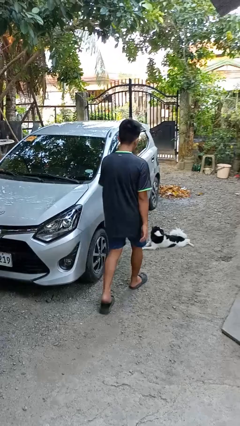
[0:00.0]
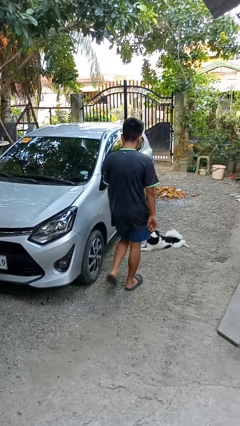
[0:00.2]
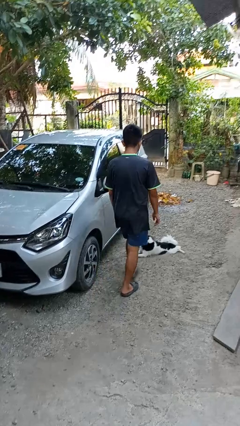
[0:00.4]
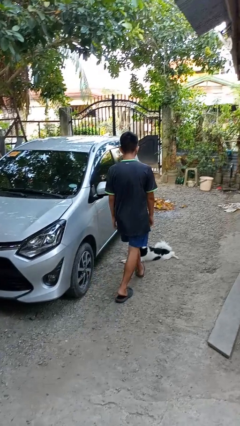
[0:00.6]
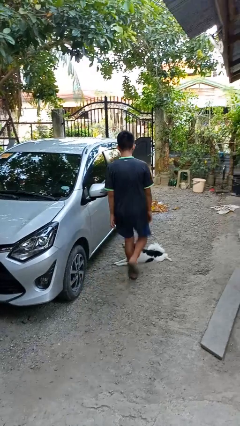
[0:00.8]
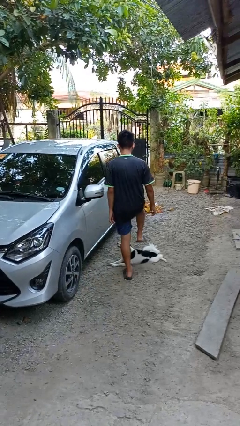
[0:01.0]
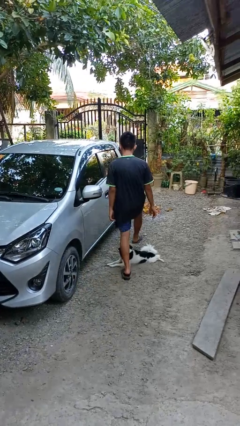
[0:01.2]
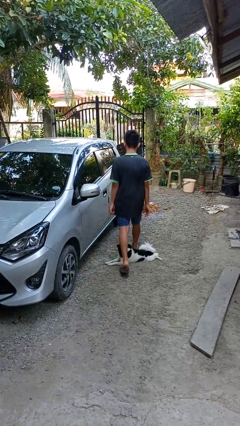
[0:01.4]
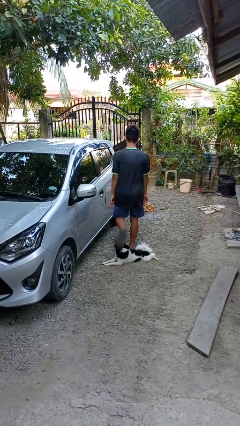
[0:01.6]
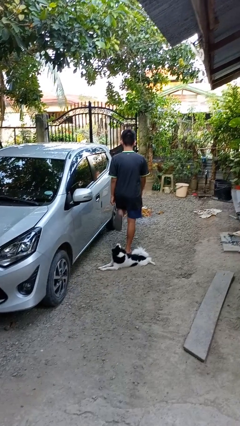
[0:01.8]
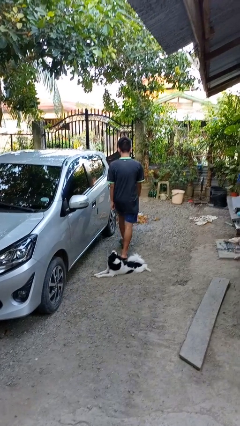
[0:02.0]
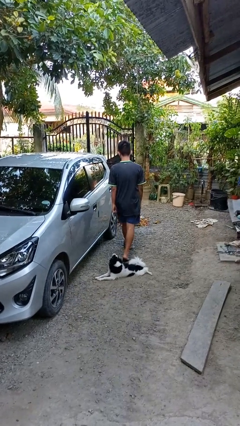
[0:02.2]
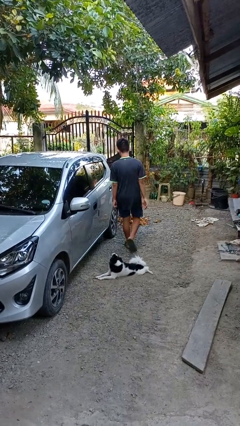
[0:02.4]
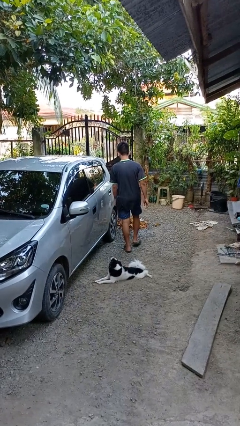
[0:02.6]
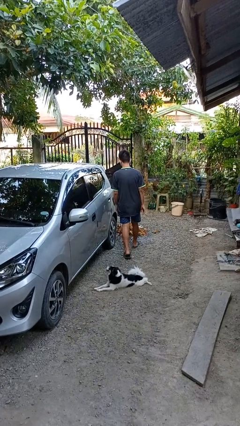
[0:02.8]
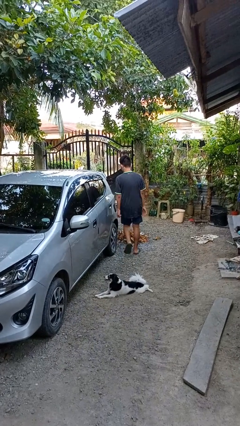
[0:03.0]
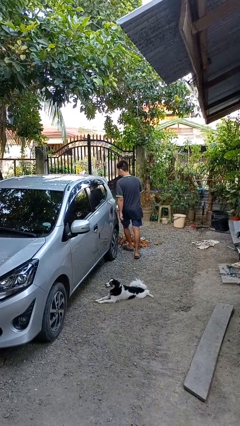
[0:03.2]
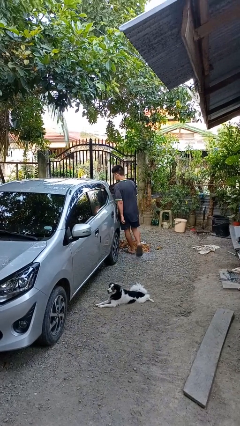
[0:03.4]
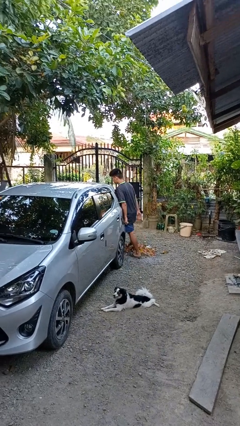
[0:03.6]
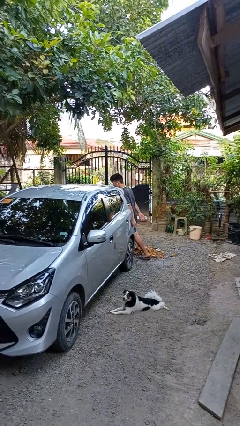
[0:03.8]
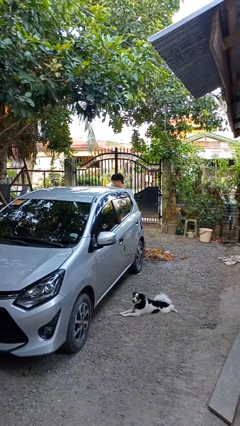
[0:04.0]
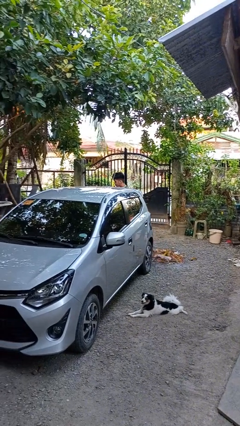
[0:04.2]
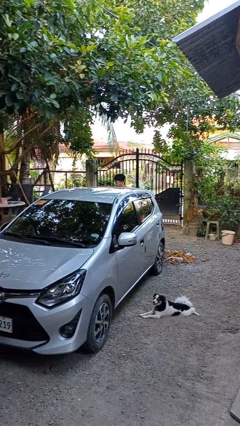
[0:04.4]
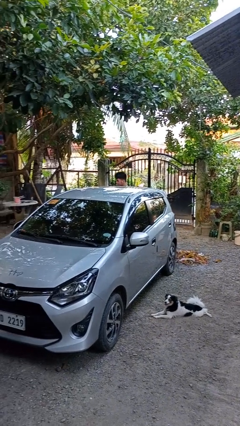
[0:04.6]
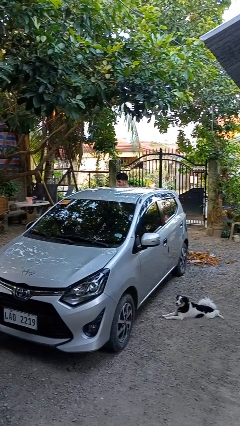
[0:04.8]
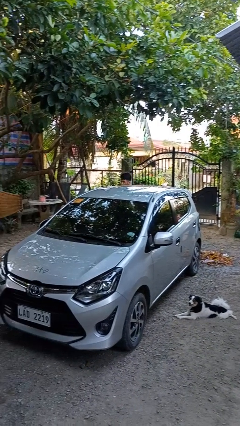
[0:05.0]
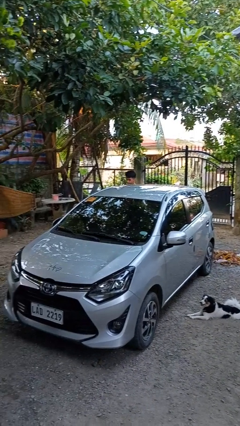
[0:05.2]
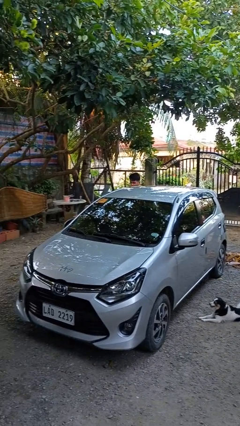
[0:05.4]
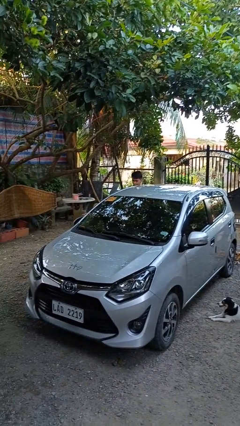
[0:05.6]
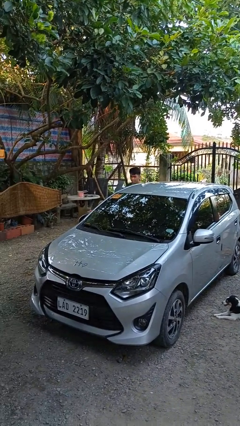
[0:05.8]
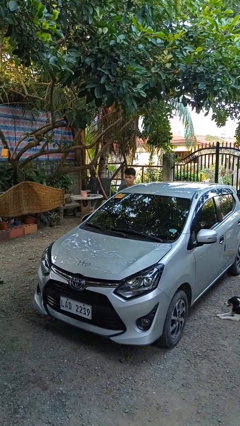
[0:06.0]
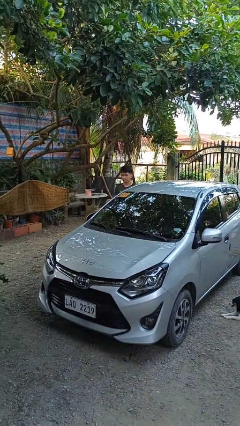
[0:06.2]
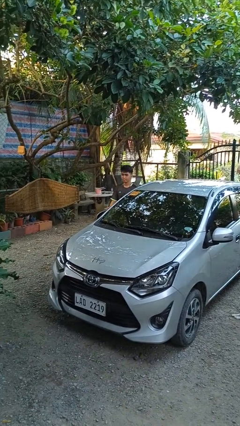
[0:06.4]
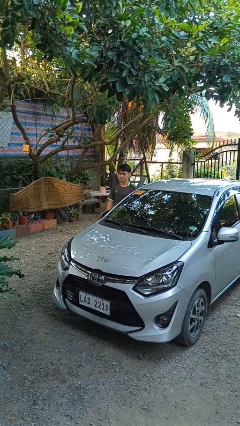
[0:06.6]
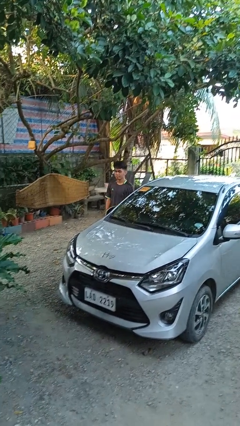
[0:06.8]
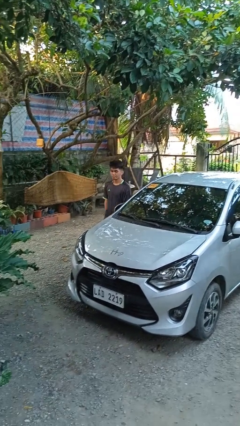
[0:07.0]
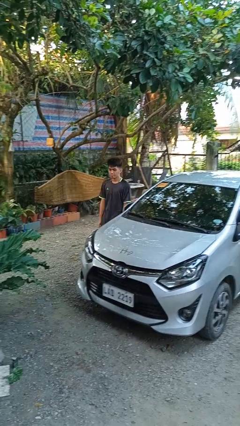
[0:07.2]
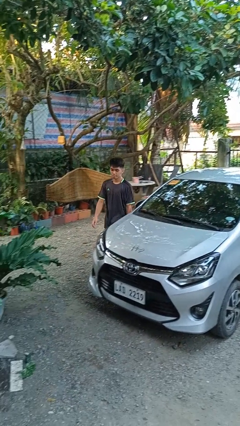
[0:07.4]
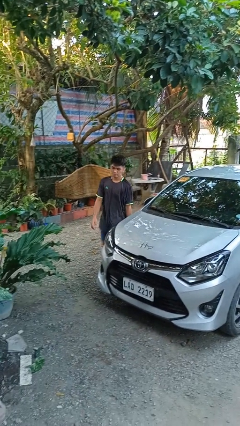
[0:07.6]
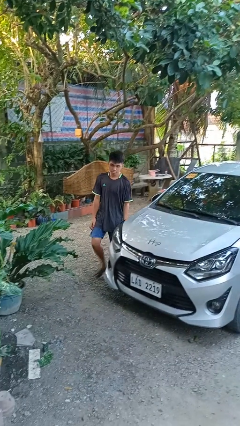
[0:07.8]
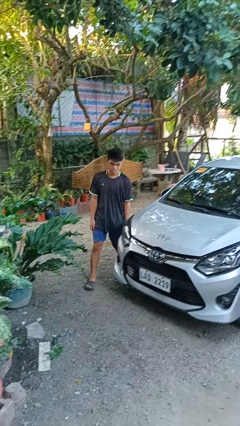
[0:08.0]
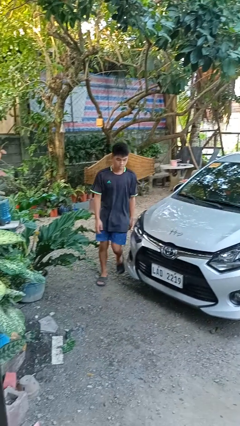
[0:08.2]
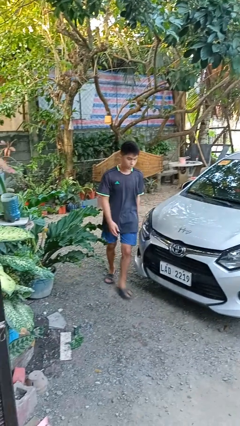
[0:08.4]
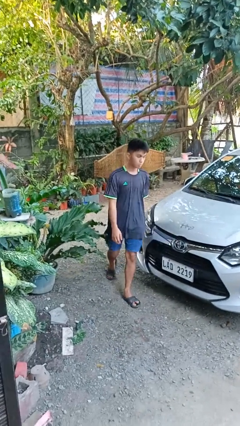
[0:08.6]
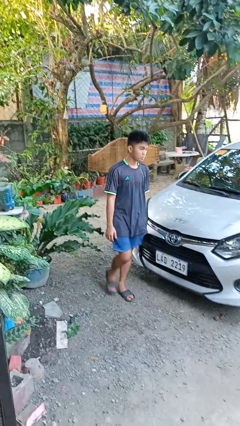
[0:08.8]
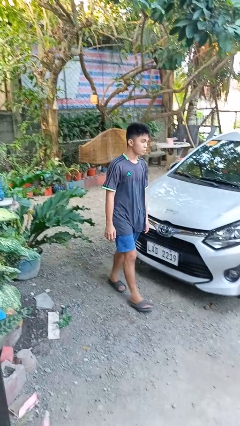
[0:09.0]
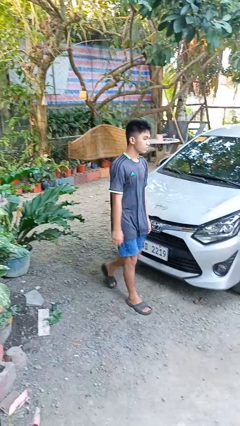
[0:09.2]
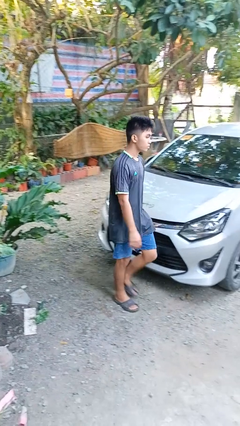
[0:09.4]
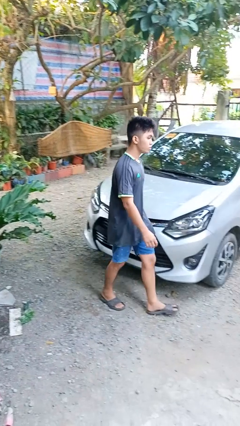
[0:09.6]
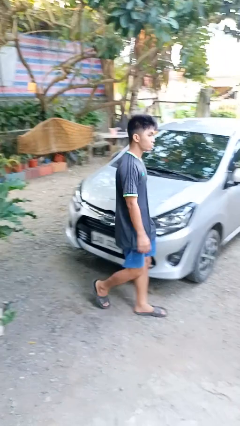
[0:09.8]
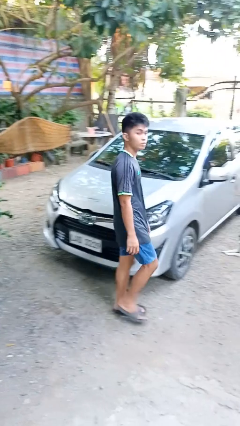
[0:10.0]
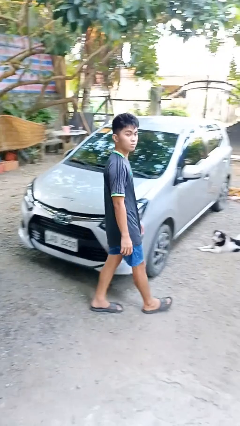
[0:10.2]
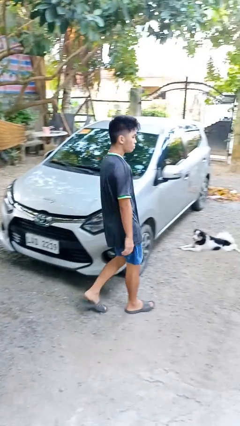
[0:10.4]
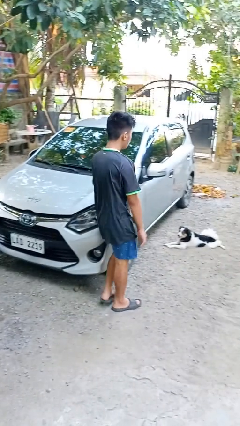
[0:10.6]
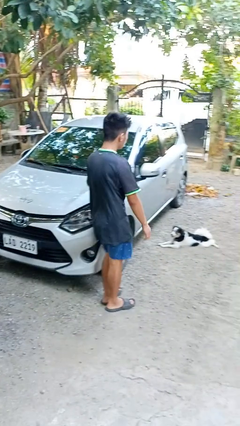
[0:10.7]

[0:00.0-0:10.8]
person walks around car

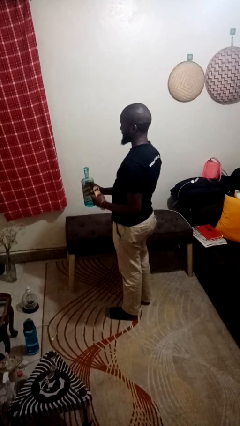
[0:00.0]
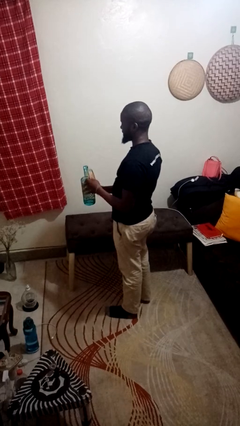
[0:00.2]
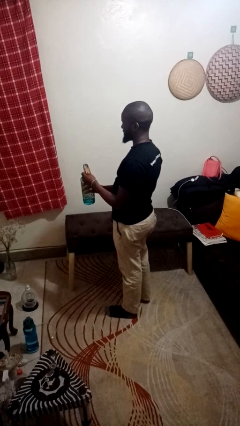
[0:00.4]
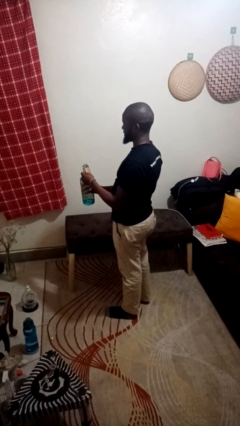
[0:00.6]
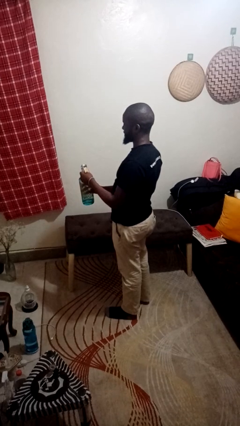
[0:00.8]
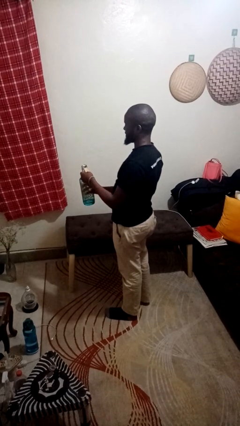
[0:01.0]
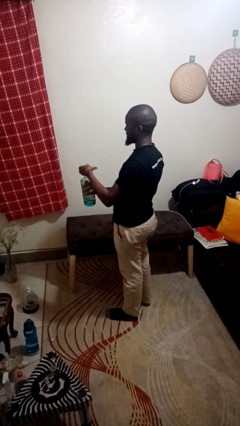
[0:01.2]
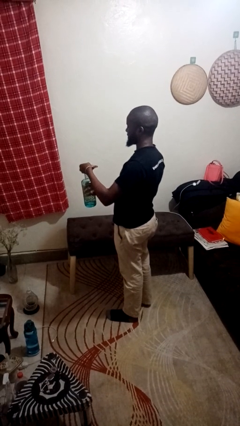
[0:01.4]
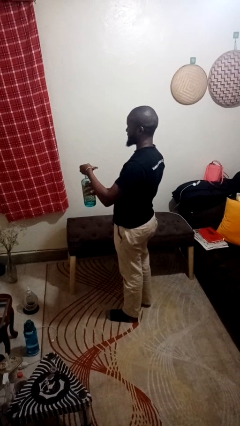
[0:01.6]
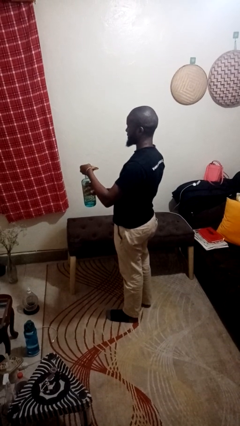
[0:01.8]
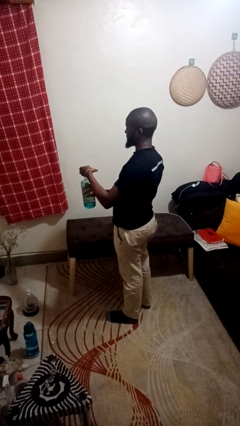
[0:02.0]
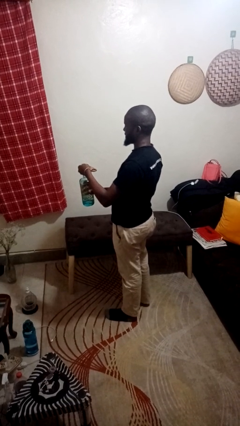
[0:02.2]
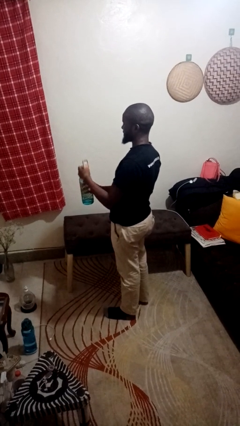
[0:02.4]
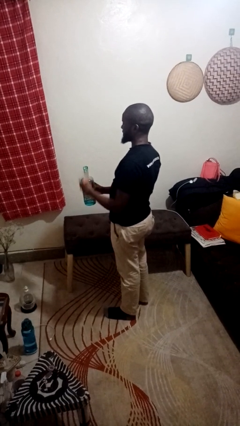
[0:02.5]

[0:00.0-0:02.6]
person opens can with can opener

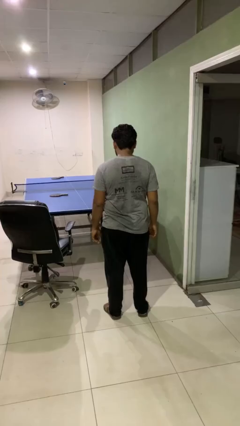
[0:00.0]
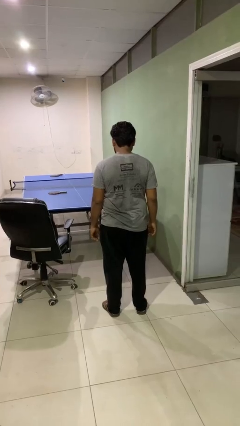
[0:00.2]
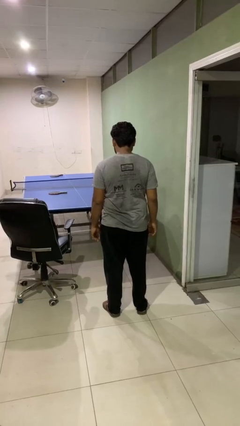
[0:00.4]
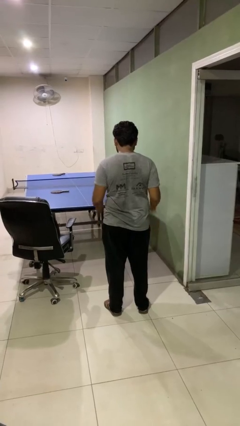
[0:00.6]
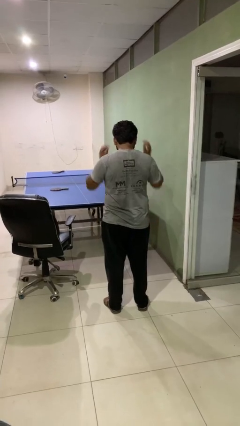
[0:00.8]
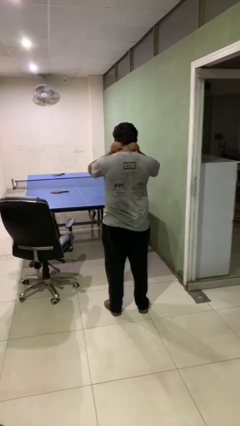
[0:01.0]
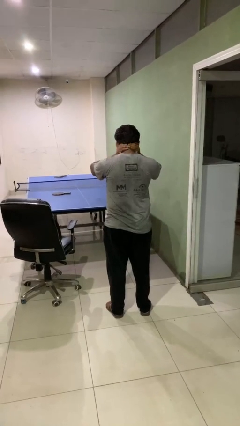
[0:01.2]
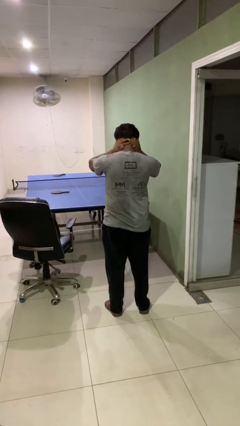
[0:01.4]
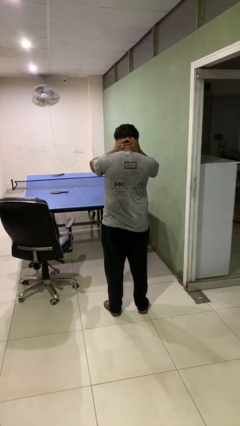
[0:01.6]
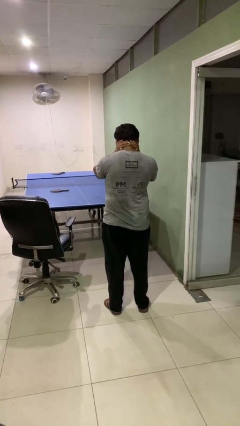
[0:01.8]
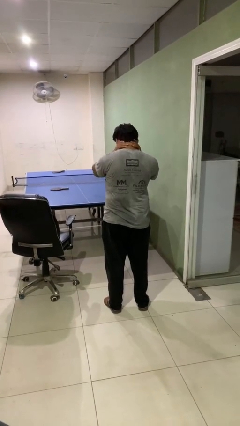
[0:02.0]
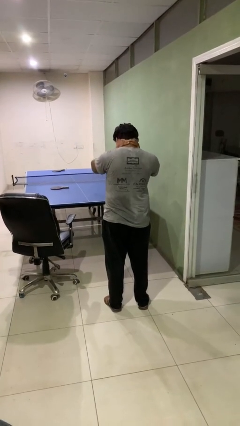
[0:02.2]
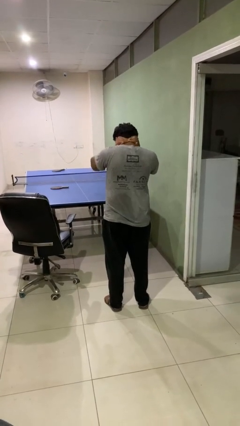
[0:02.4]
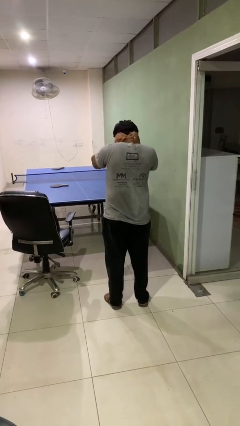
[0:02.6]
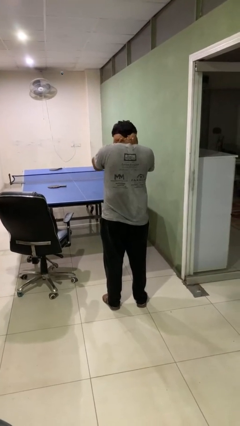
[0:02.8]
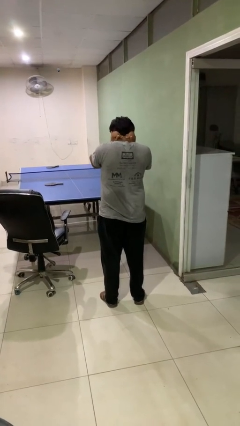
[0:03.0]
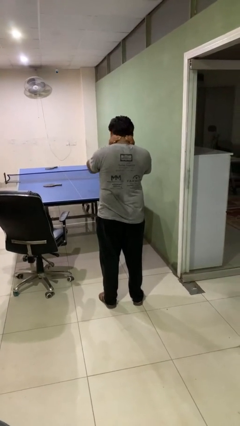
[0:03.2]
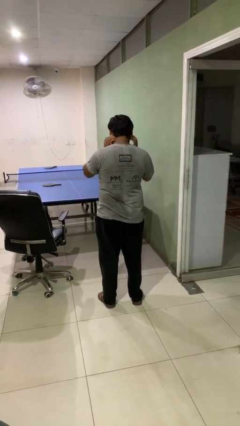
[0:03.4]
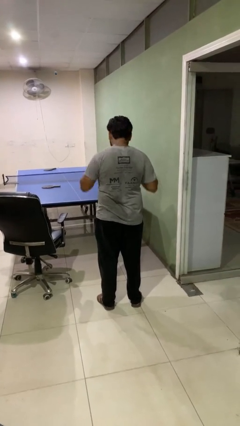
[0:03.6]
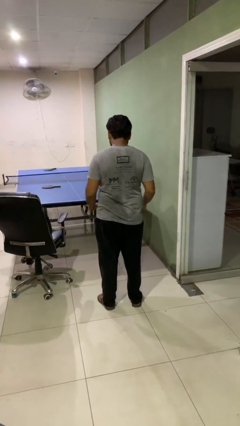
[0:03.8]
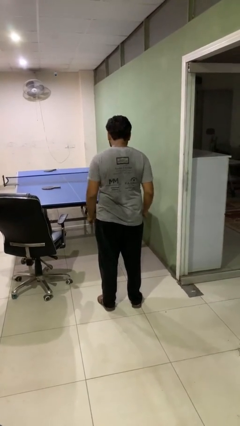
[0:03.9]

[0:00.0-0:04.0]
person rubs neck

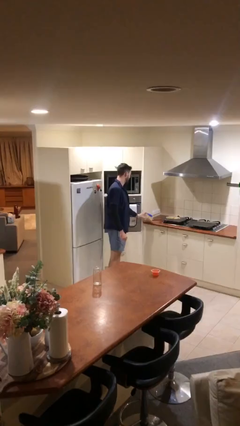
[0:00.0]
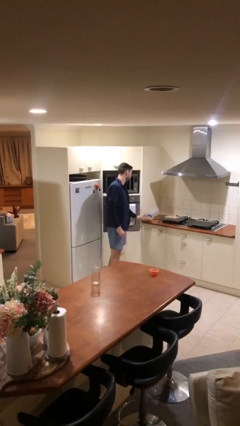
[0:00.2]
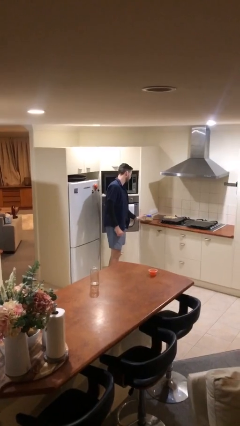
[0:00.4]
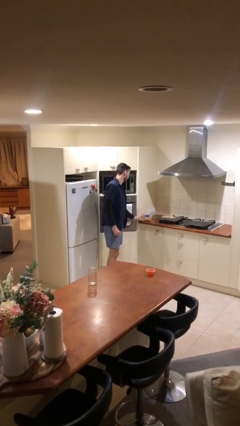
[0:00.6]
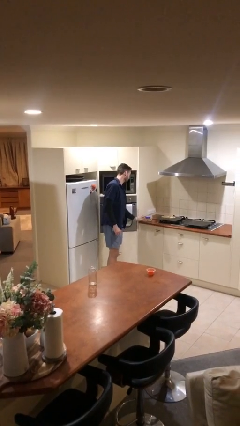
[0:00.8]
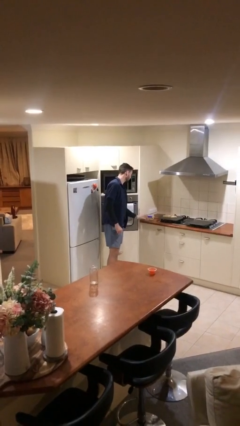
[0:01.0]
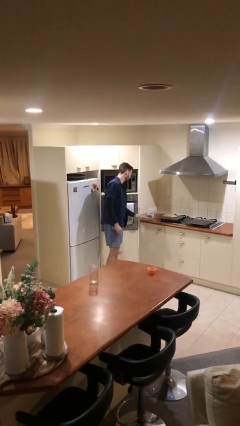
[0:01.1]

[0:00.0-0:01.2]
person puts down object on table
